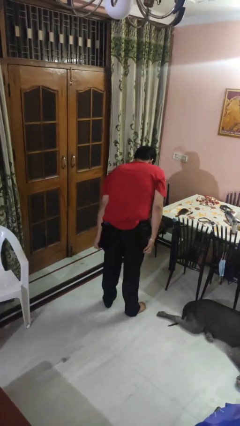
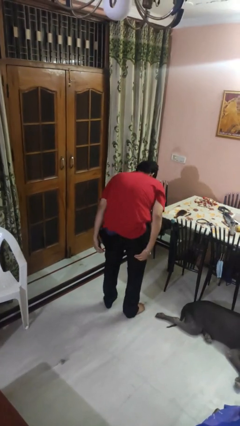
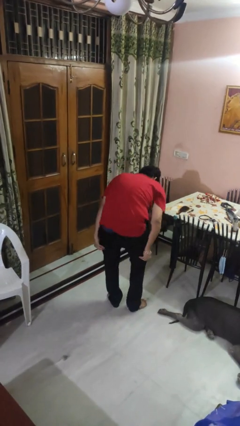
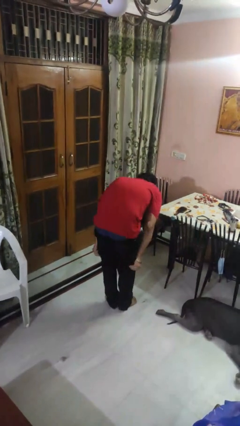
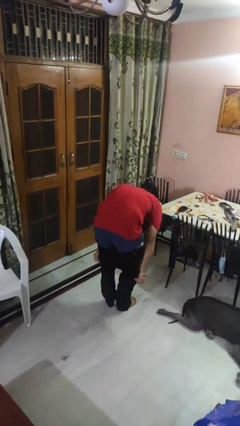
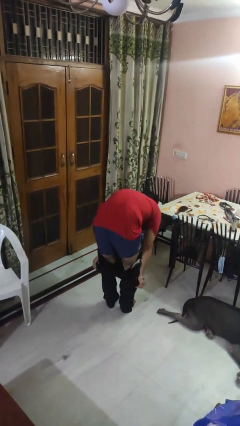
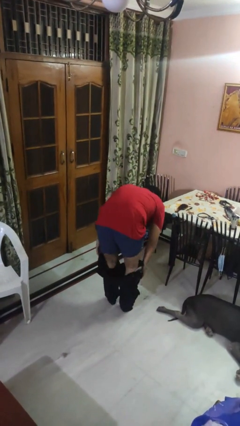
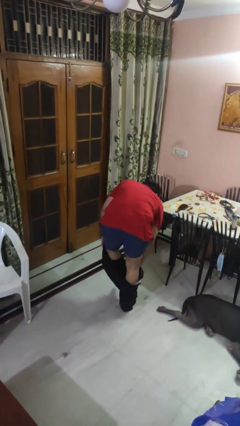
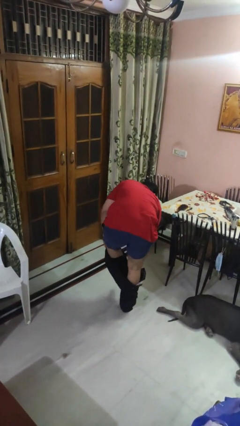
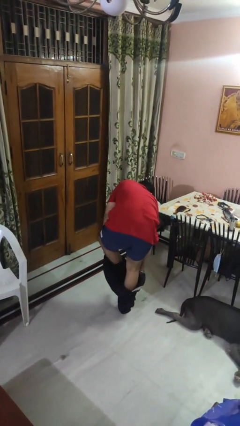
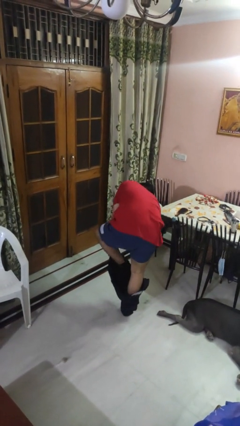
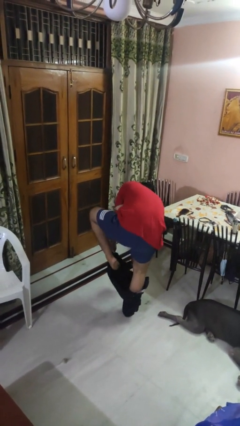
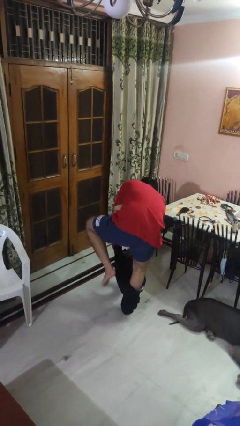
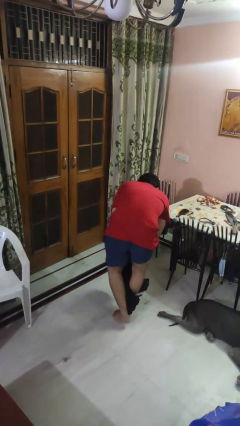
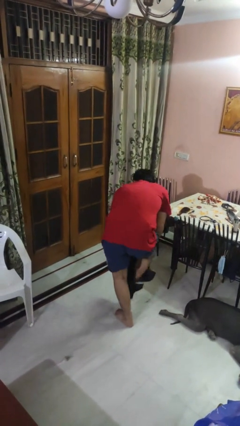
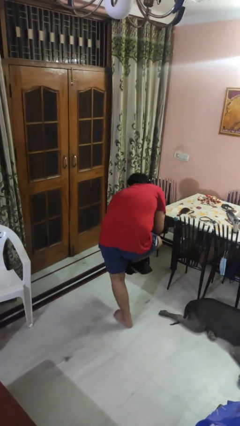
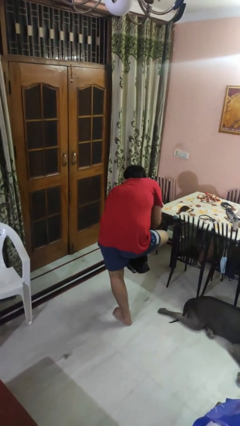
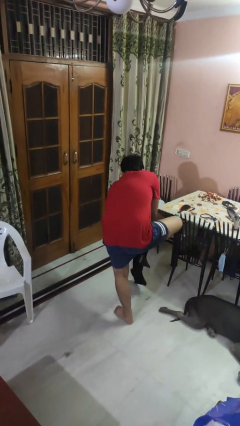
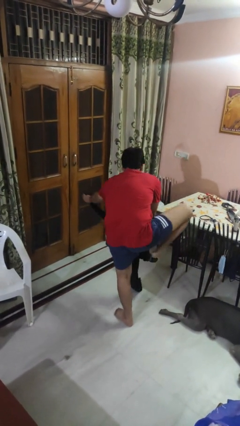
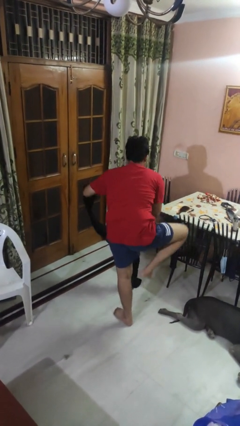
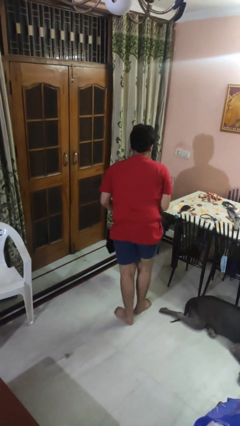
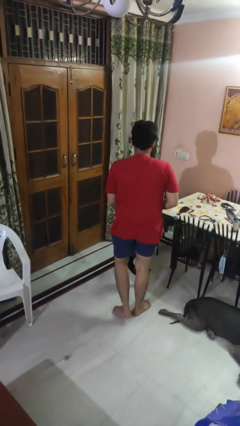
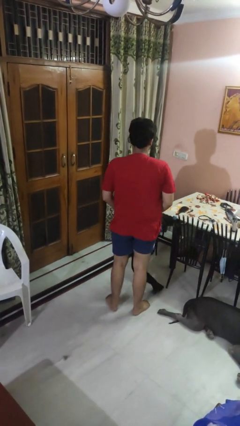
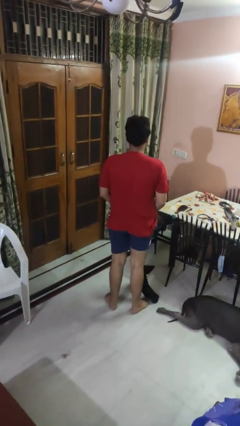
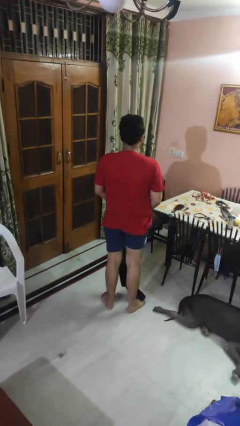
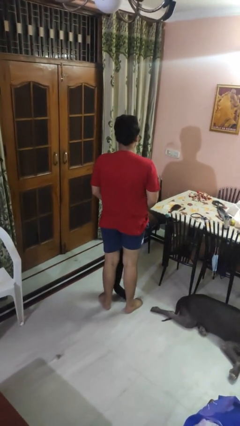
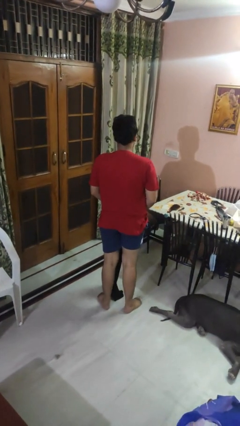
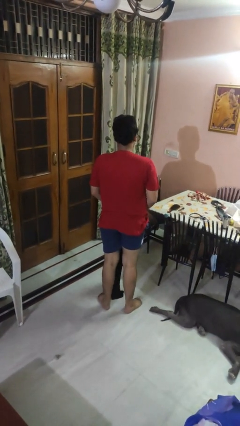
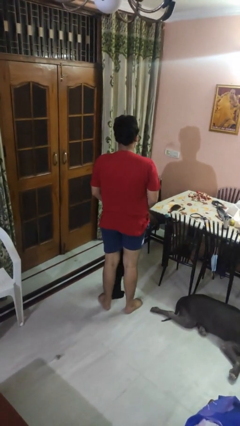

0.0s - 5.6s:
person takes off pants

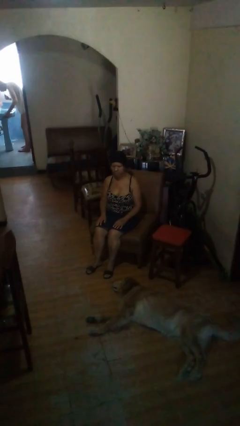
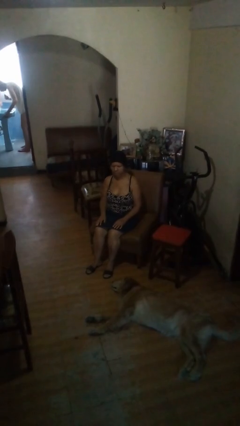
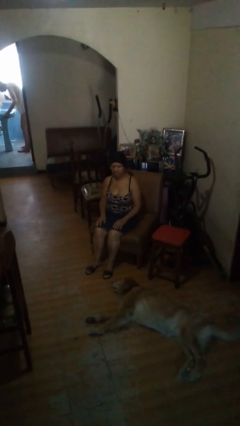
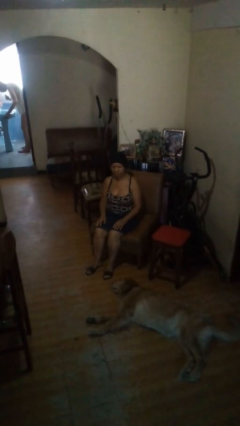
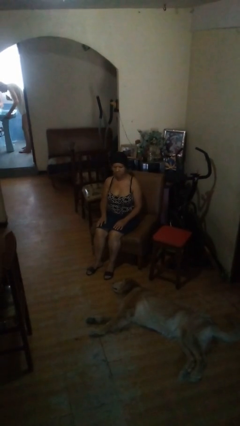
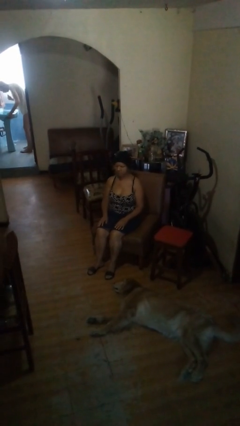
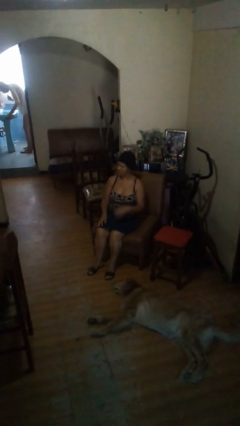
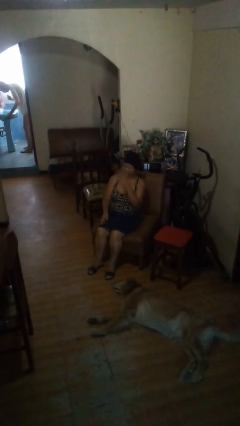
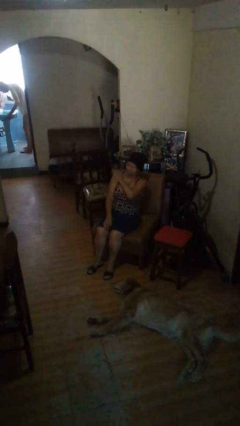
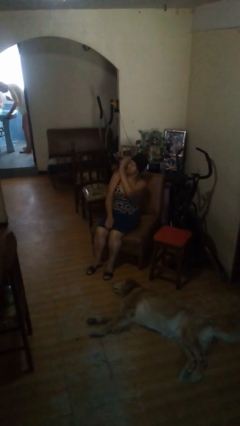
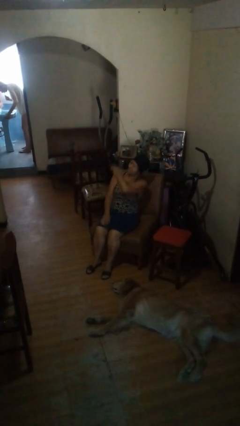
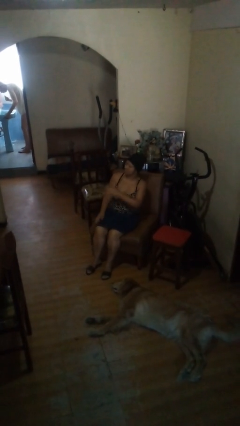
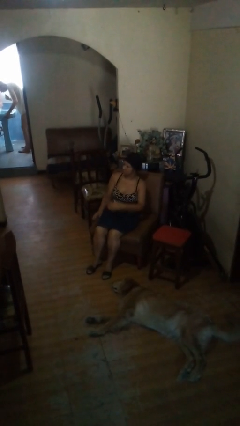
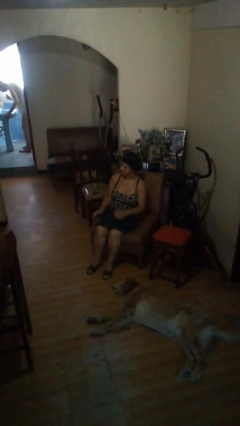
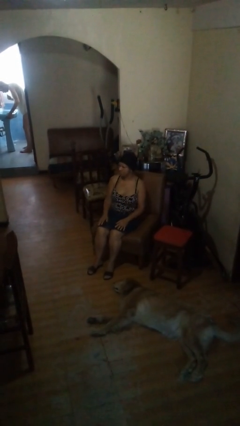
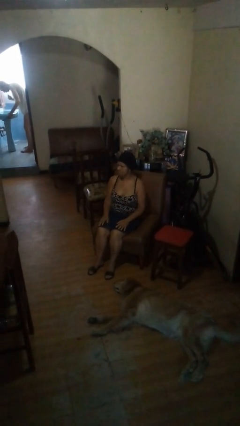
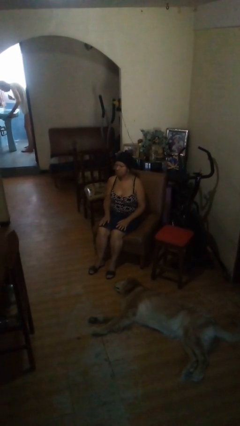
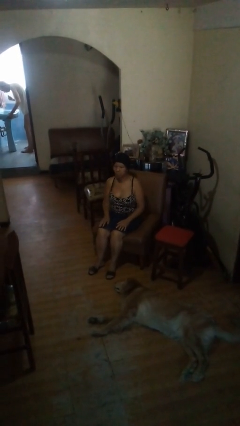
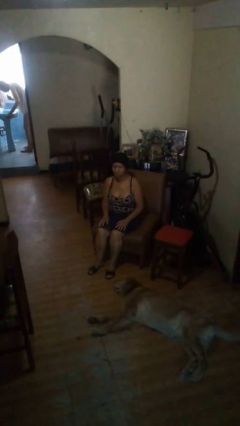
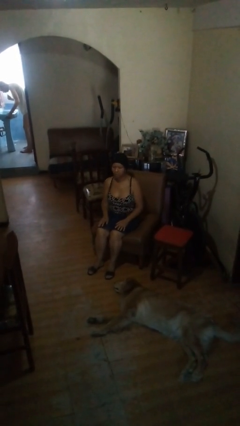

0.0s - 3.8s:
person swats bug

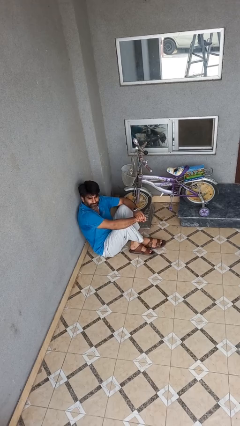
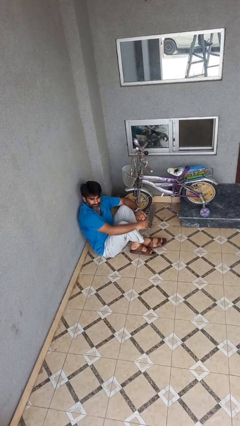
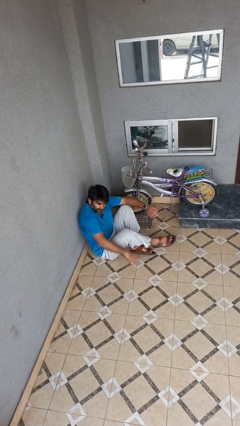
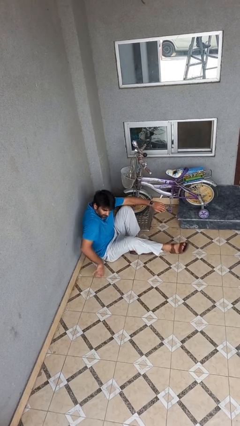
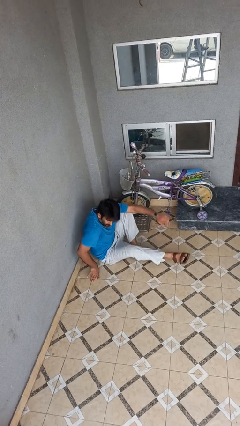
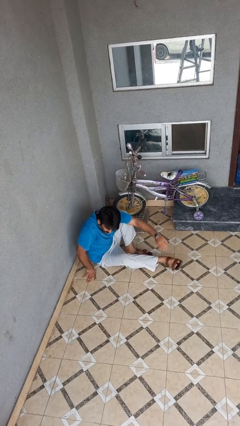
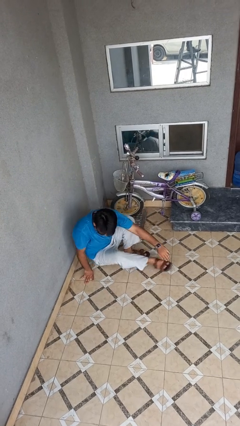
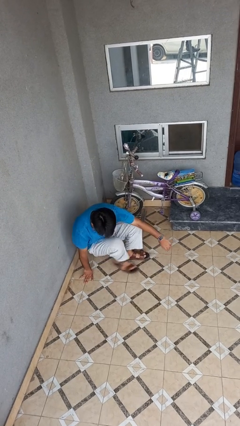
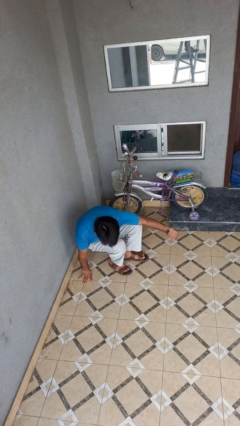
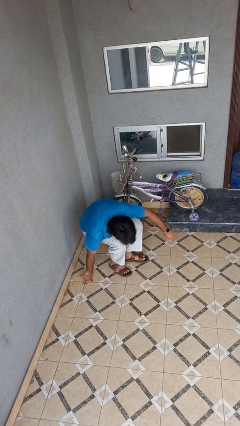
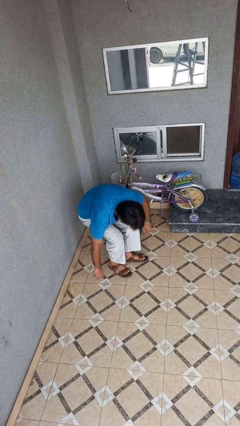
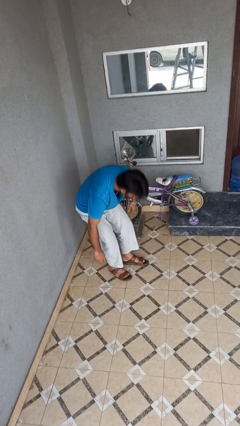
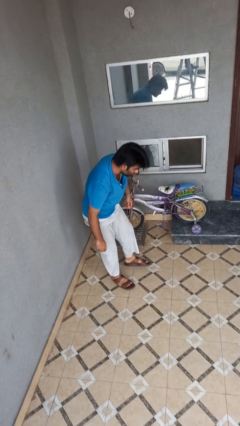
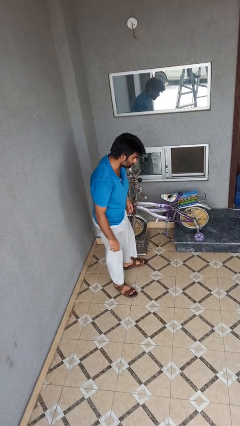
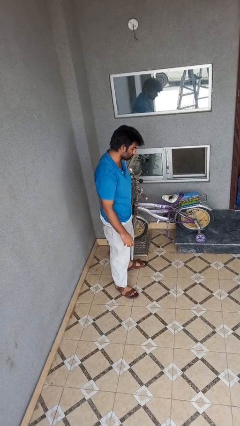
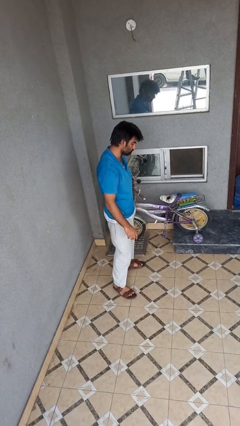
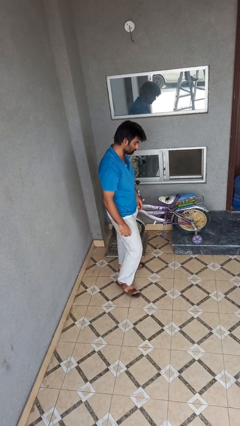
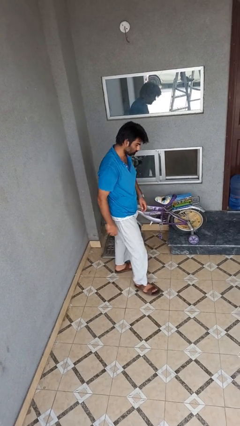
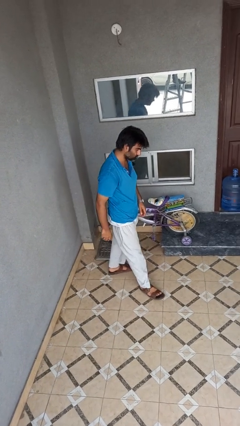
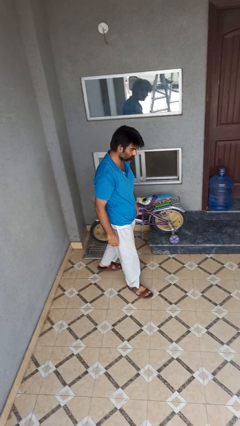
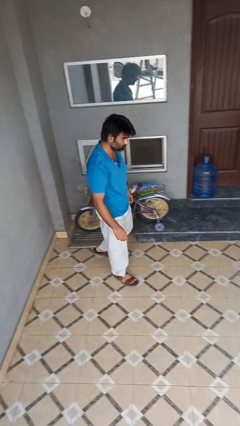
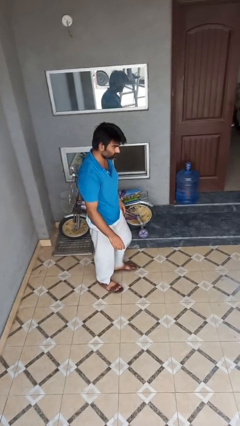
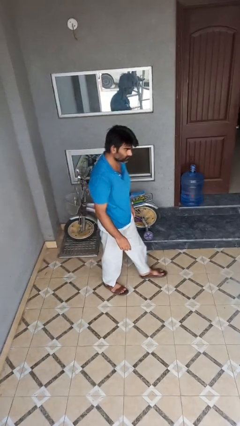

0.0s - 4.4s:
person stands up from floor

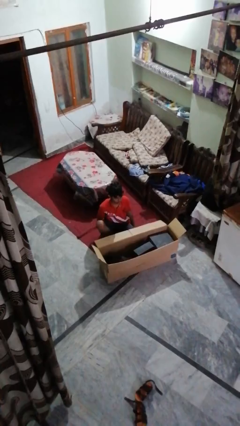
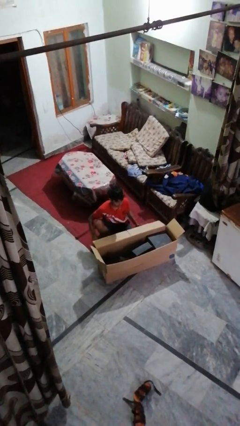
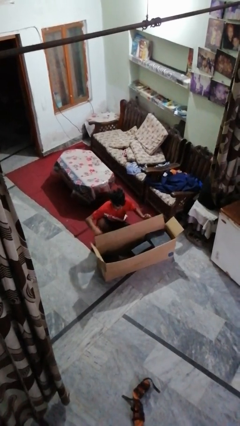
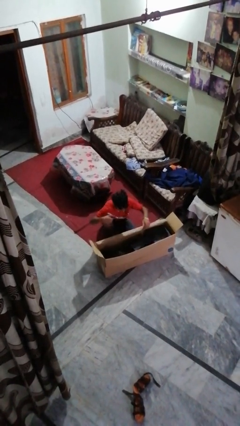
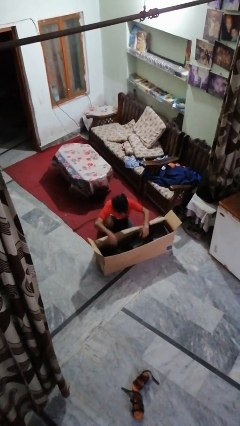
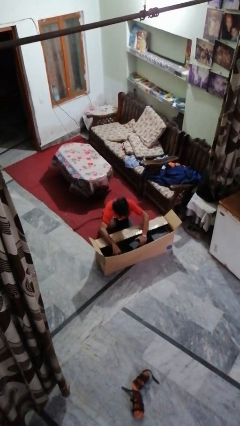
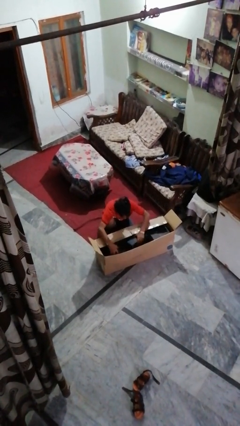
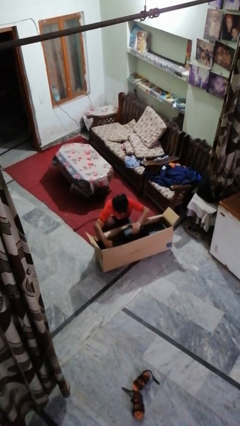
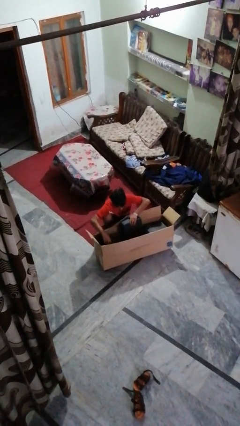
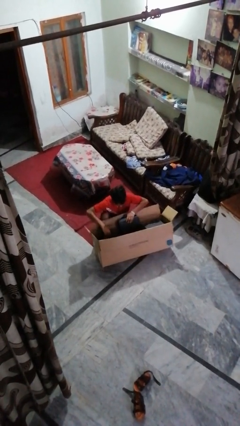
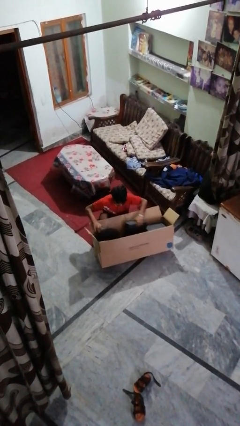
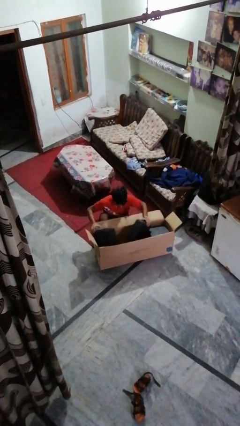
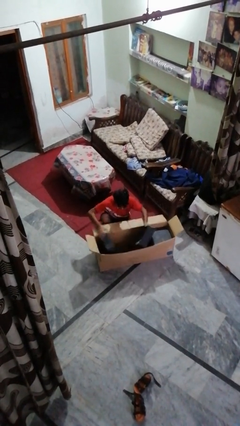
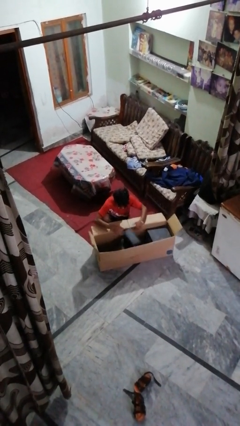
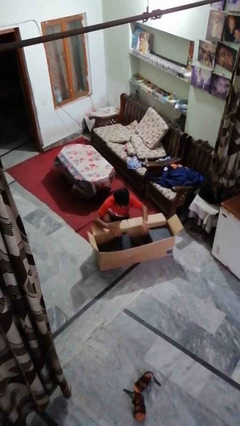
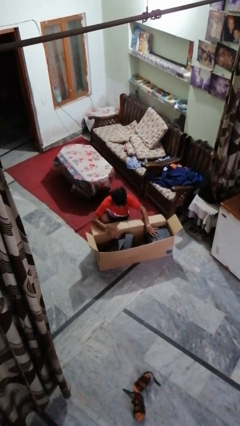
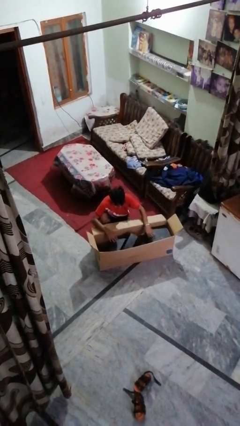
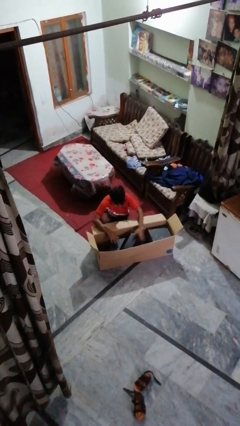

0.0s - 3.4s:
person searches in box

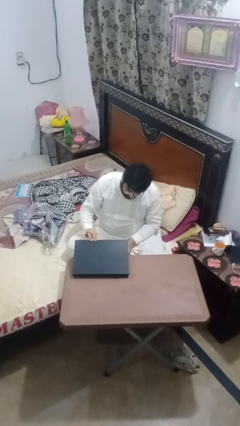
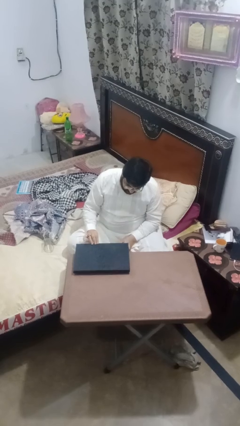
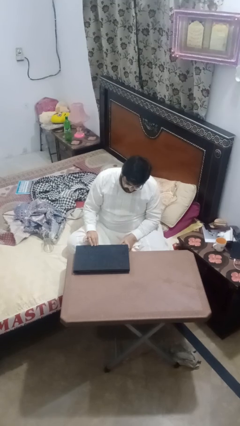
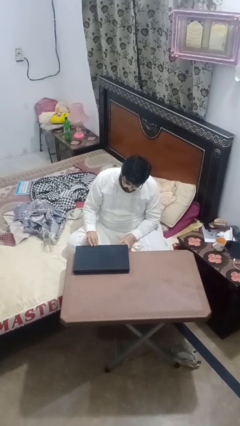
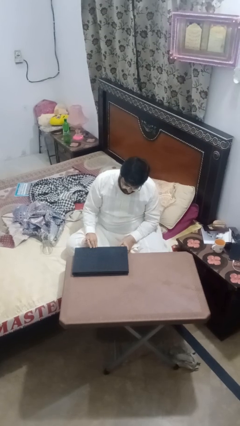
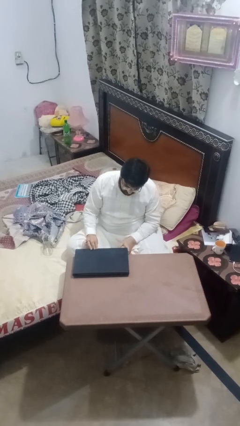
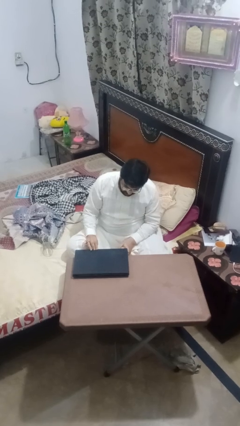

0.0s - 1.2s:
person closes laptop
